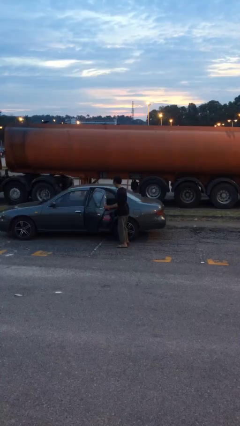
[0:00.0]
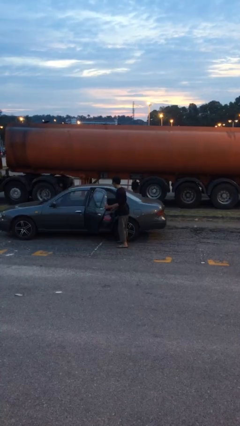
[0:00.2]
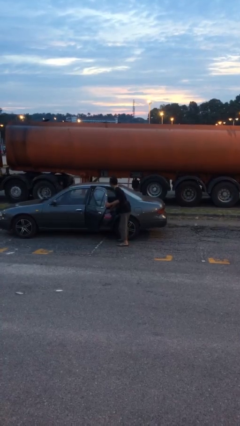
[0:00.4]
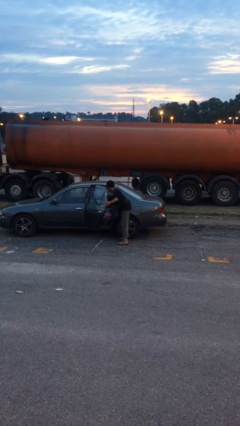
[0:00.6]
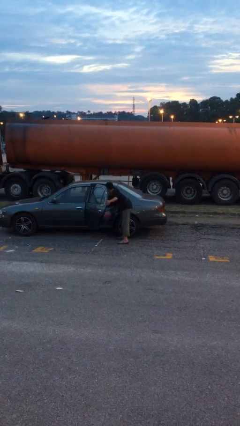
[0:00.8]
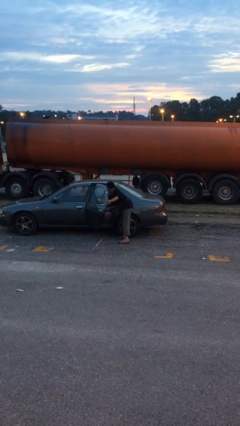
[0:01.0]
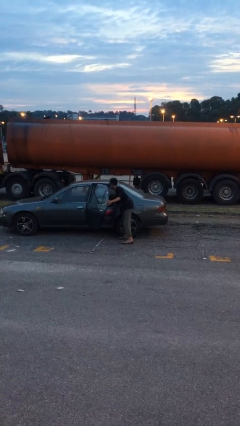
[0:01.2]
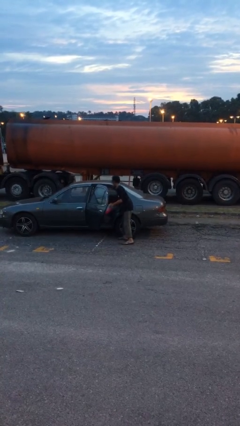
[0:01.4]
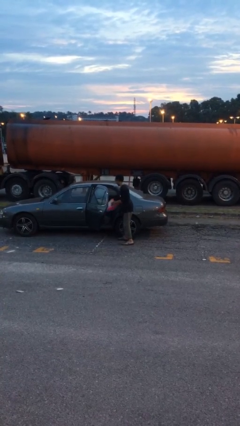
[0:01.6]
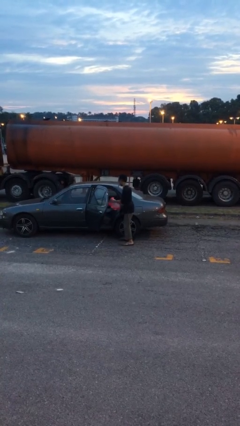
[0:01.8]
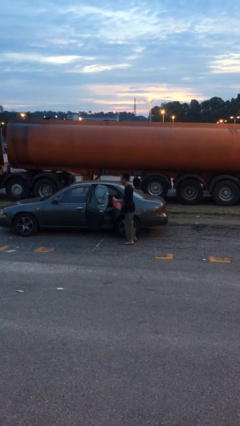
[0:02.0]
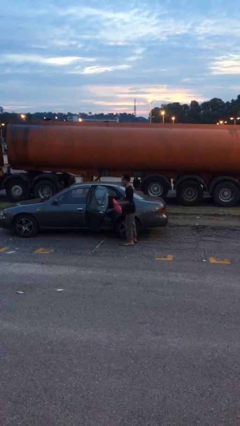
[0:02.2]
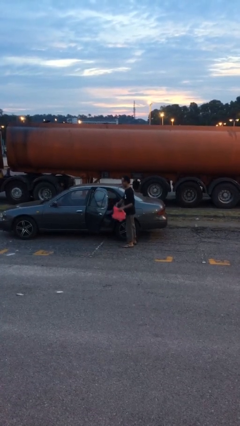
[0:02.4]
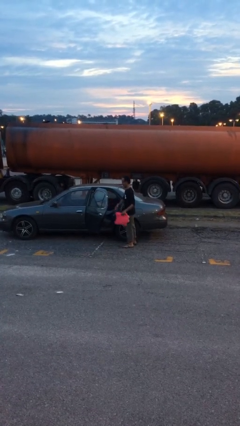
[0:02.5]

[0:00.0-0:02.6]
person unloads car

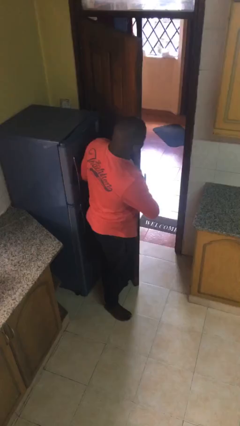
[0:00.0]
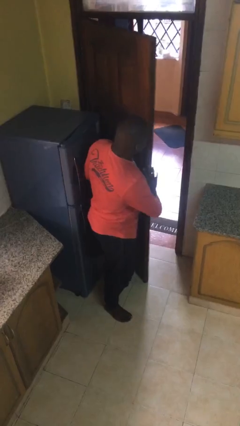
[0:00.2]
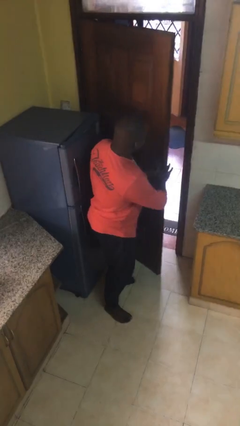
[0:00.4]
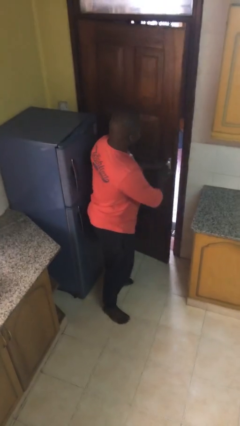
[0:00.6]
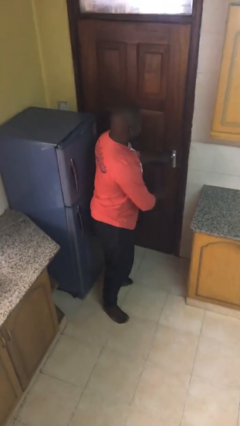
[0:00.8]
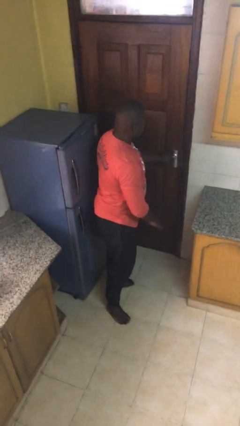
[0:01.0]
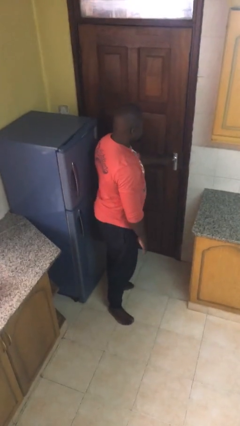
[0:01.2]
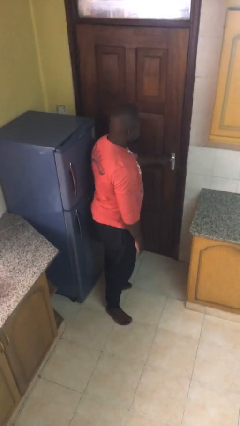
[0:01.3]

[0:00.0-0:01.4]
person closes facility door

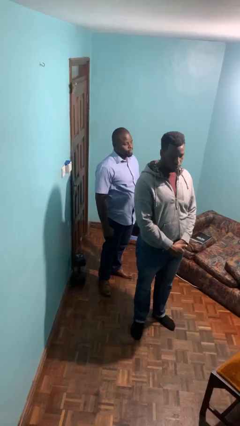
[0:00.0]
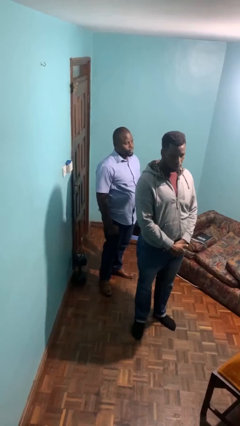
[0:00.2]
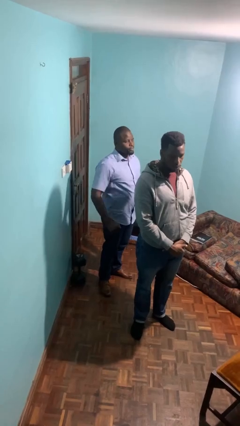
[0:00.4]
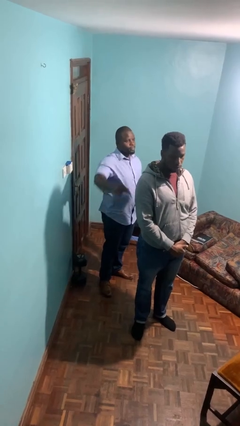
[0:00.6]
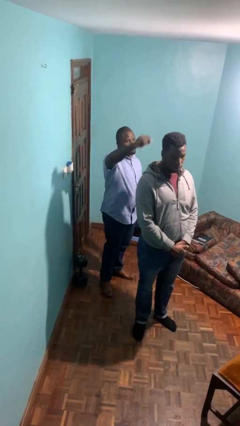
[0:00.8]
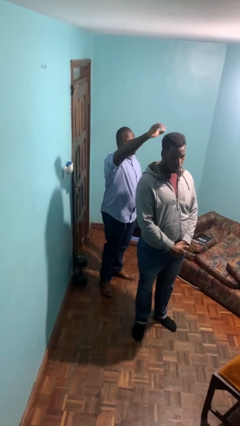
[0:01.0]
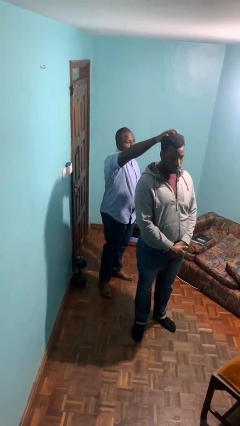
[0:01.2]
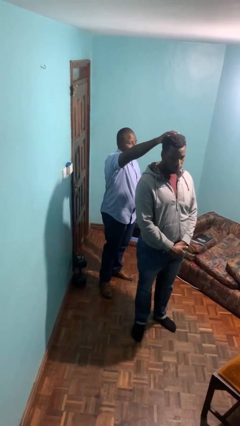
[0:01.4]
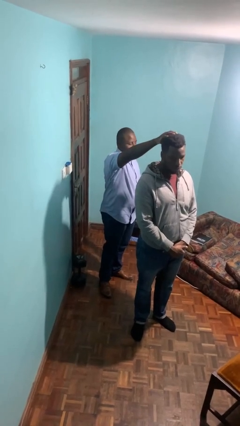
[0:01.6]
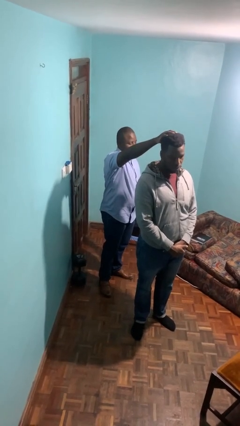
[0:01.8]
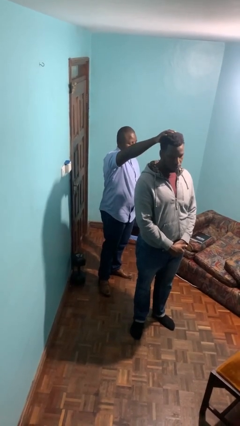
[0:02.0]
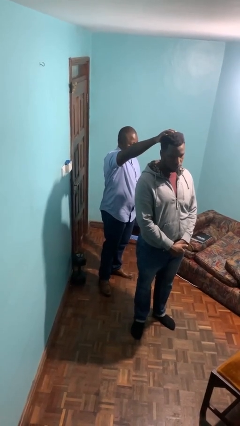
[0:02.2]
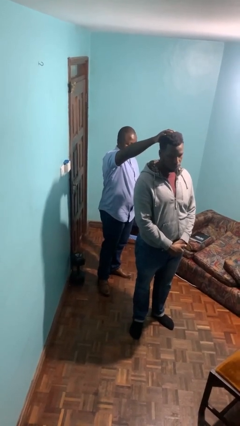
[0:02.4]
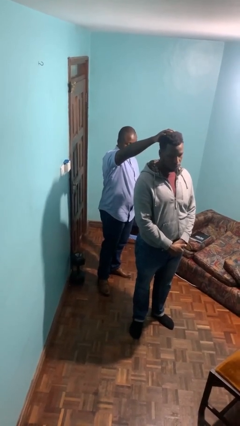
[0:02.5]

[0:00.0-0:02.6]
person grabs person by hair

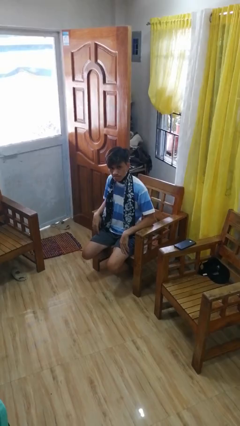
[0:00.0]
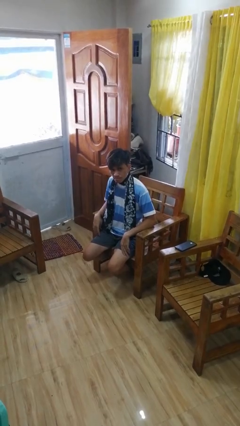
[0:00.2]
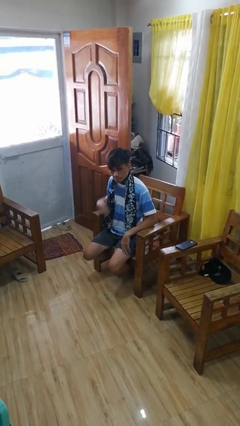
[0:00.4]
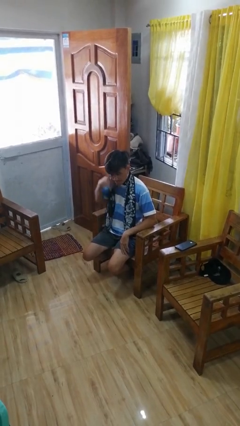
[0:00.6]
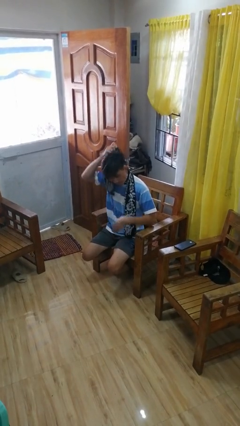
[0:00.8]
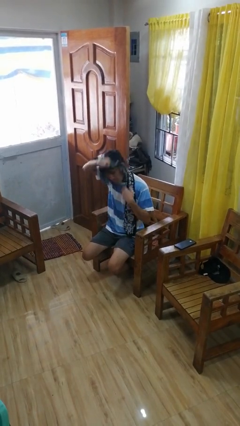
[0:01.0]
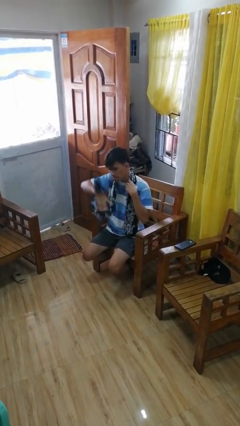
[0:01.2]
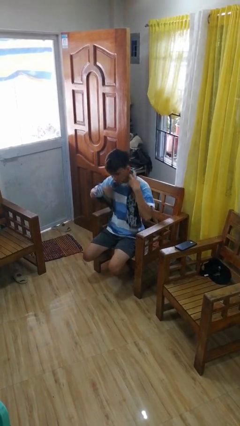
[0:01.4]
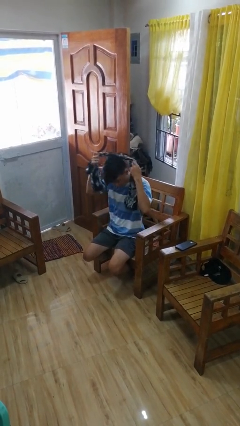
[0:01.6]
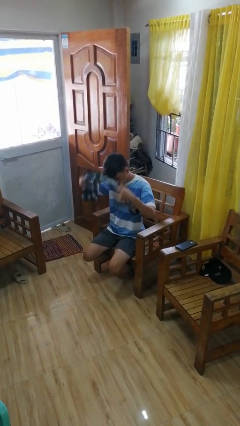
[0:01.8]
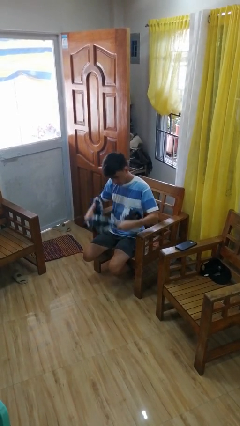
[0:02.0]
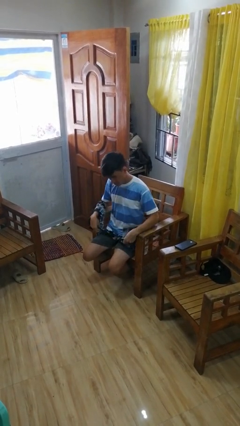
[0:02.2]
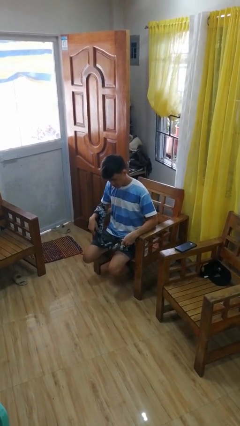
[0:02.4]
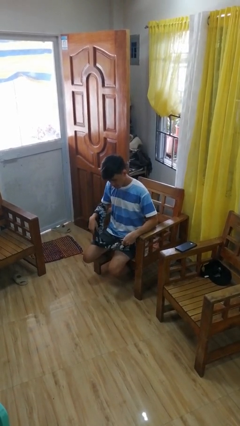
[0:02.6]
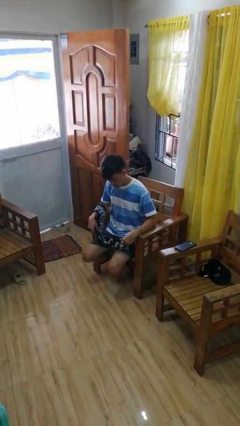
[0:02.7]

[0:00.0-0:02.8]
person takes off scarf

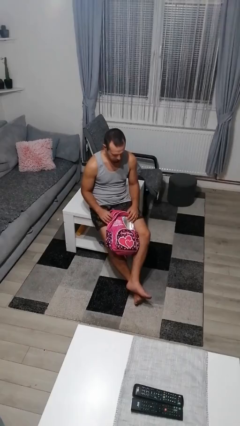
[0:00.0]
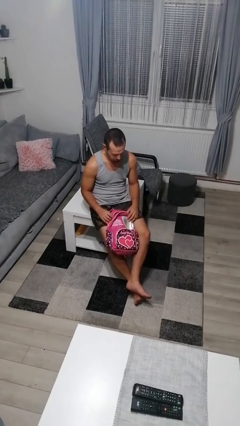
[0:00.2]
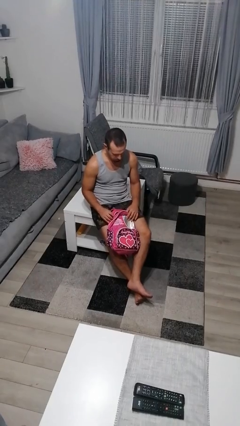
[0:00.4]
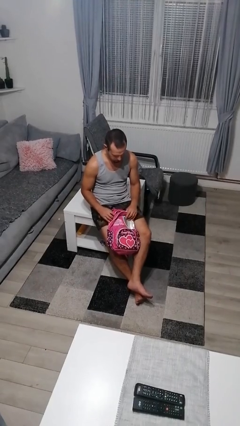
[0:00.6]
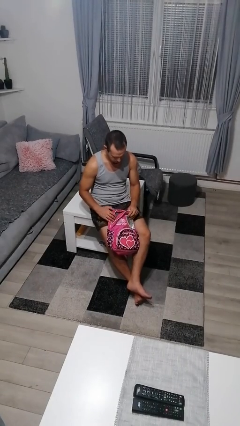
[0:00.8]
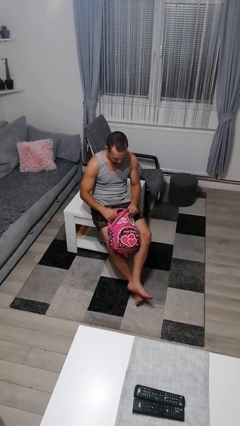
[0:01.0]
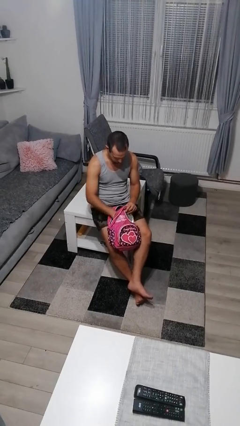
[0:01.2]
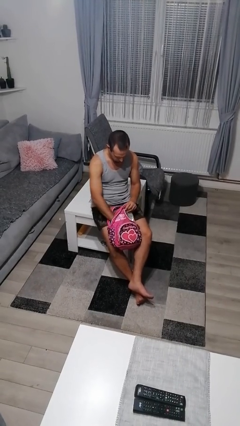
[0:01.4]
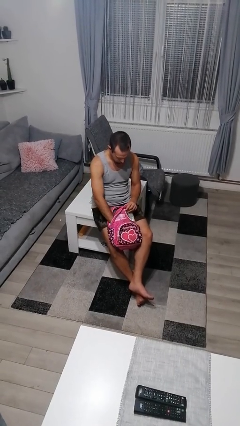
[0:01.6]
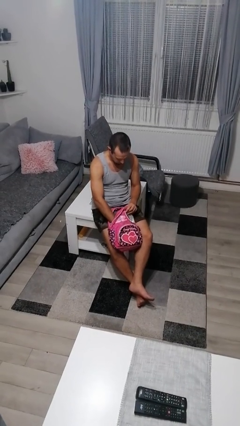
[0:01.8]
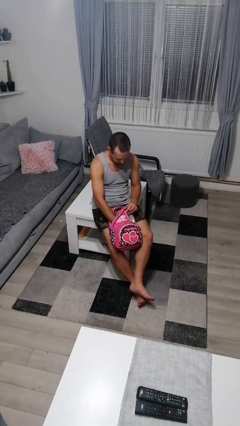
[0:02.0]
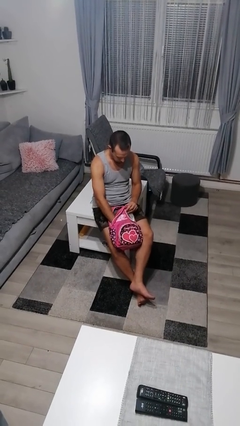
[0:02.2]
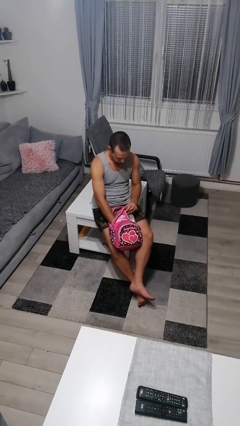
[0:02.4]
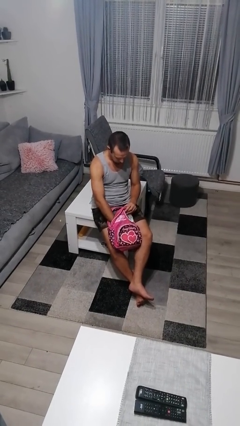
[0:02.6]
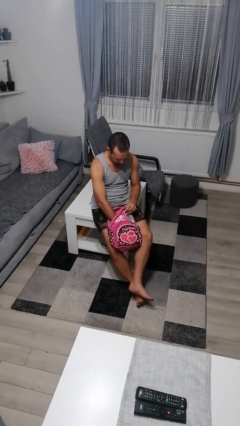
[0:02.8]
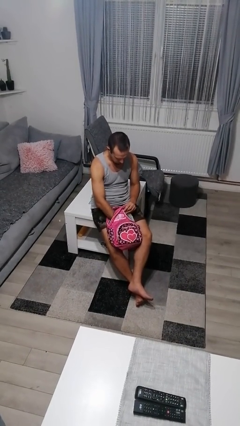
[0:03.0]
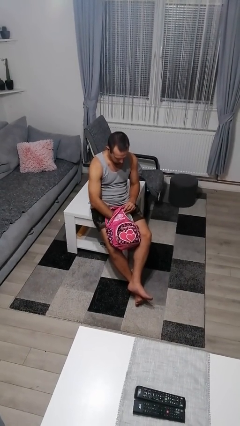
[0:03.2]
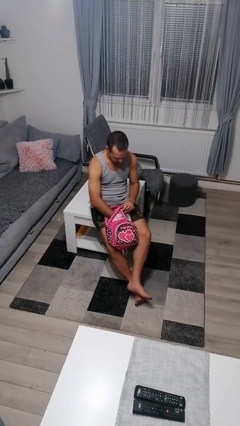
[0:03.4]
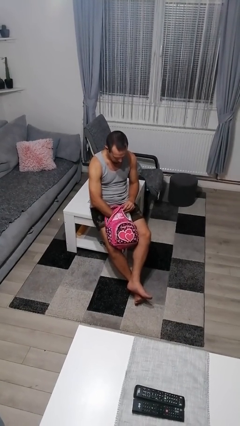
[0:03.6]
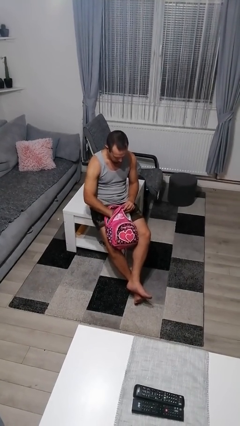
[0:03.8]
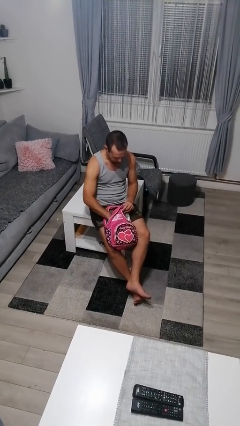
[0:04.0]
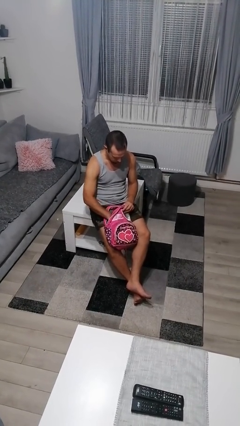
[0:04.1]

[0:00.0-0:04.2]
person searches in backpack

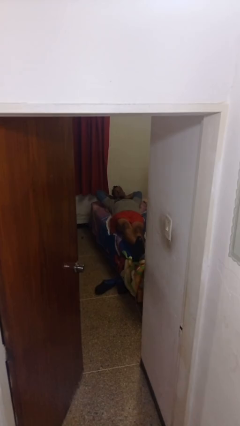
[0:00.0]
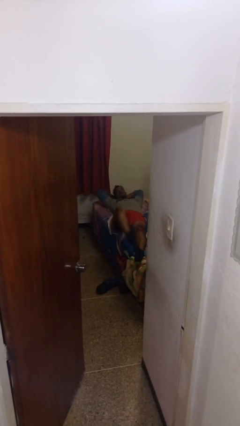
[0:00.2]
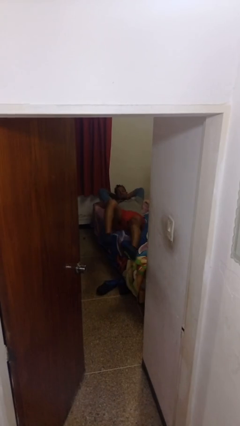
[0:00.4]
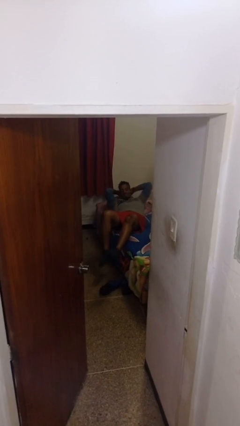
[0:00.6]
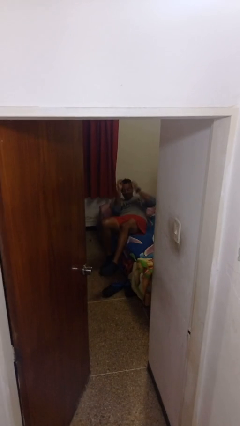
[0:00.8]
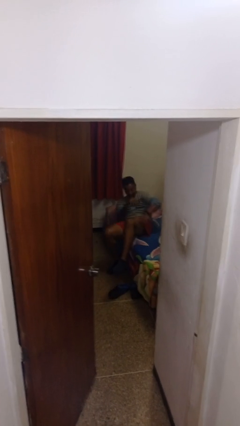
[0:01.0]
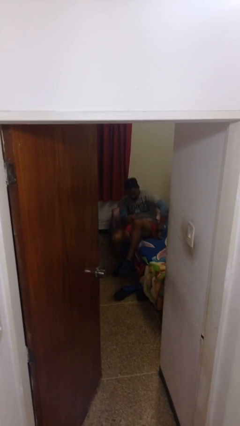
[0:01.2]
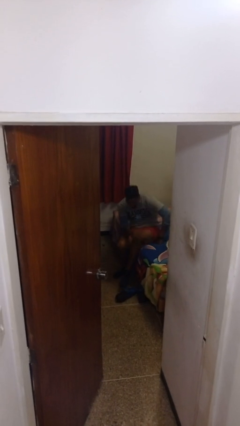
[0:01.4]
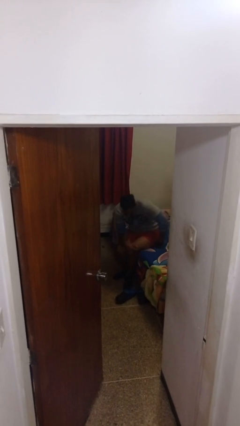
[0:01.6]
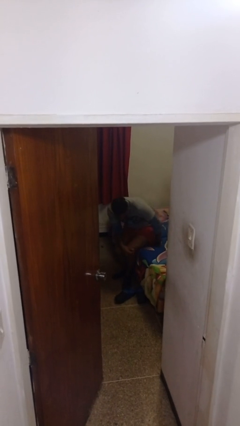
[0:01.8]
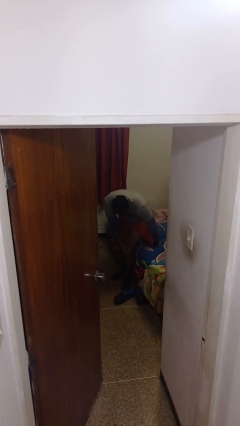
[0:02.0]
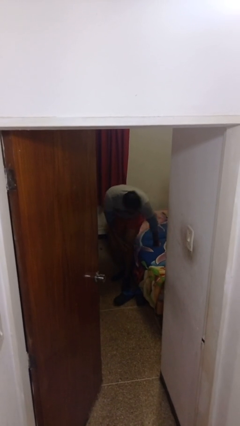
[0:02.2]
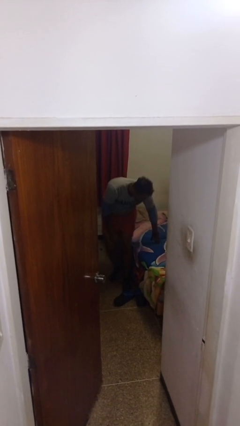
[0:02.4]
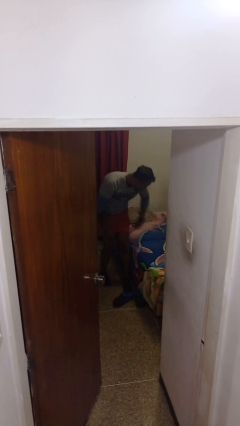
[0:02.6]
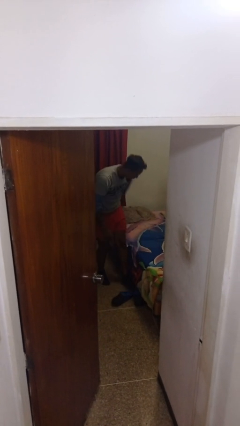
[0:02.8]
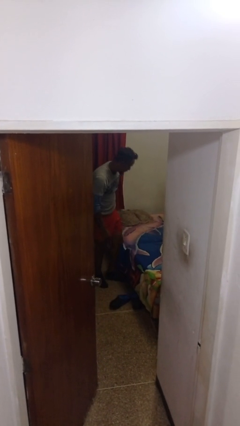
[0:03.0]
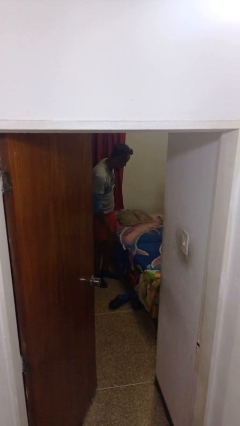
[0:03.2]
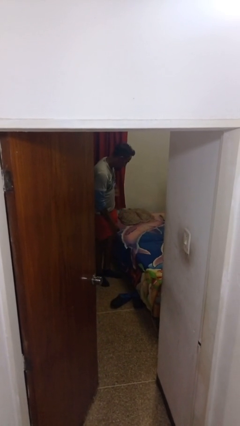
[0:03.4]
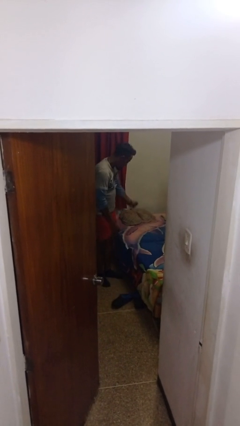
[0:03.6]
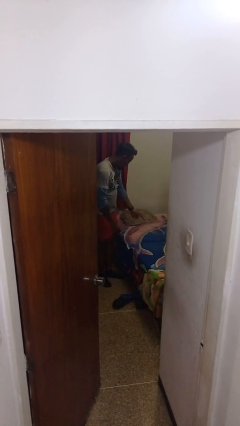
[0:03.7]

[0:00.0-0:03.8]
person stands up

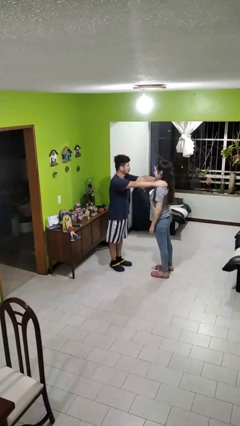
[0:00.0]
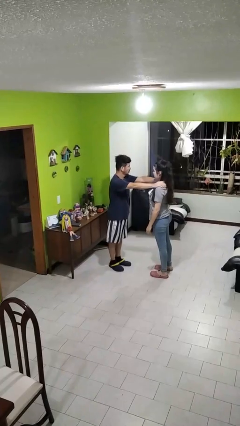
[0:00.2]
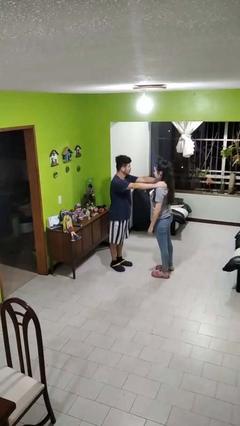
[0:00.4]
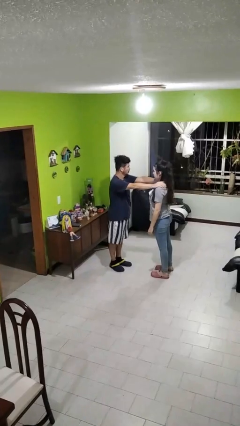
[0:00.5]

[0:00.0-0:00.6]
person grabs person by shoulder
